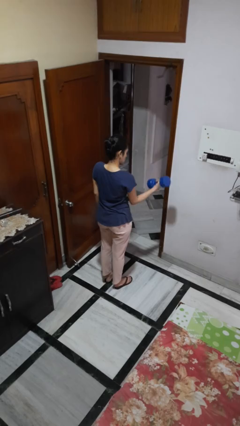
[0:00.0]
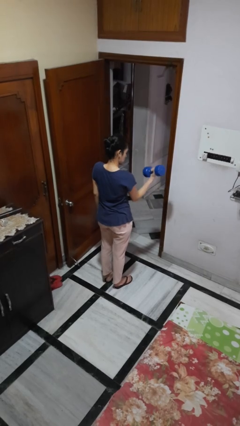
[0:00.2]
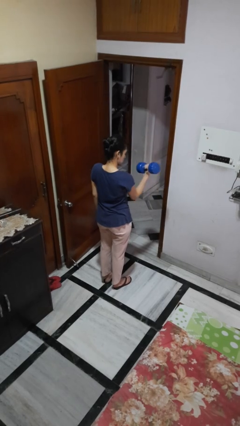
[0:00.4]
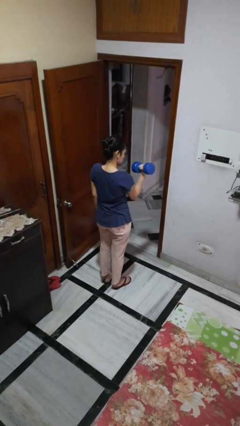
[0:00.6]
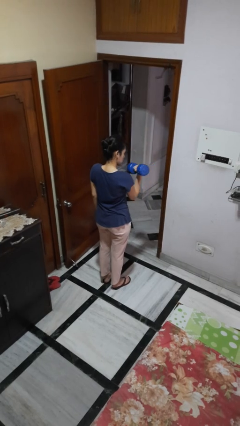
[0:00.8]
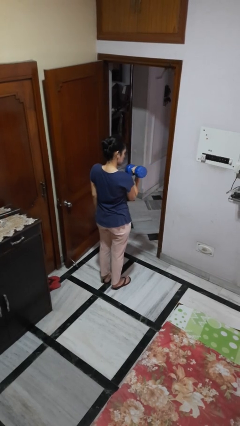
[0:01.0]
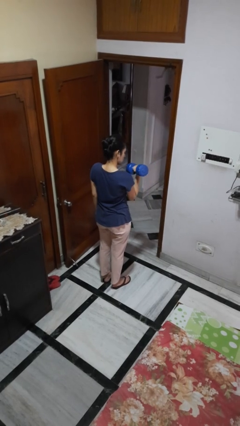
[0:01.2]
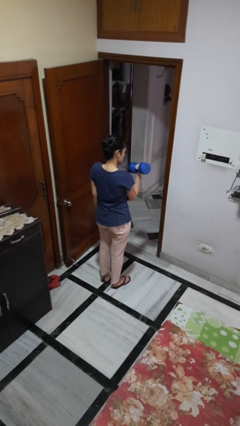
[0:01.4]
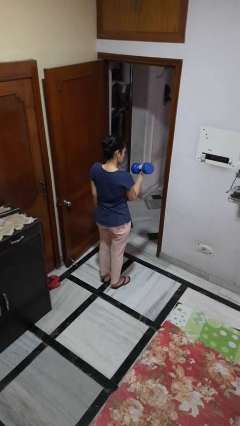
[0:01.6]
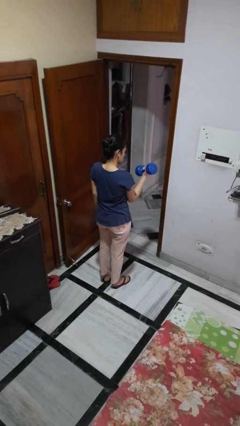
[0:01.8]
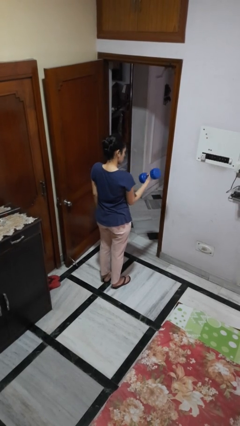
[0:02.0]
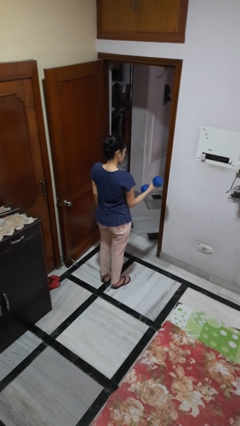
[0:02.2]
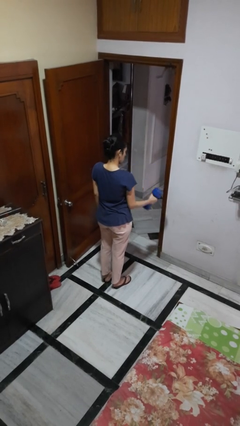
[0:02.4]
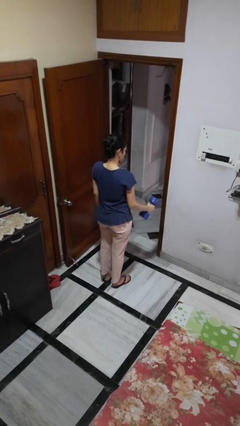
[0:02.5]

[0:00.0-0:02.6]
person lifts dumbbells

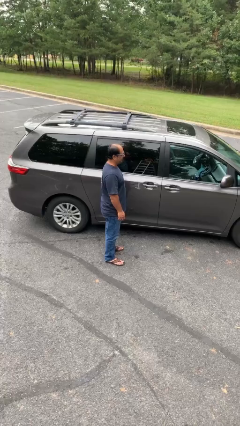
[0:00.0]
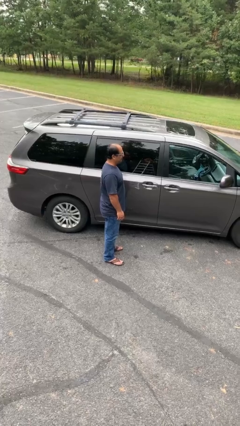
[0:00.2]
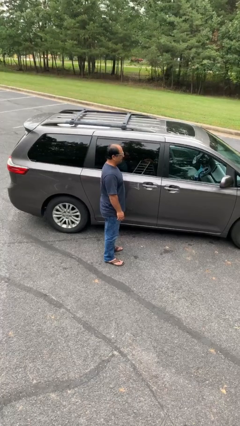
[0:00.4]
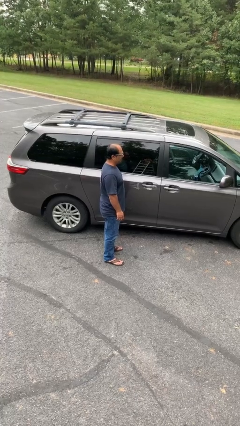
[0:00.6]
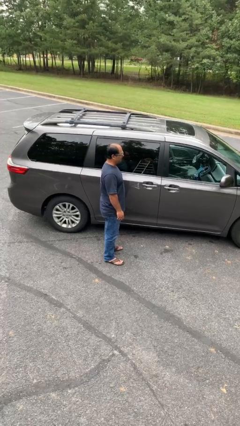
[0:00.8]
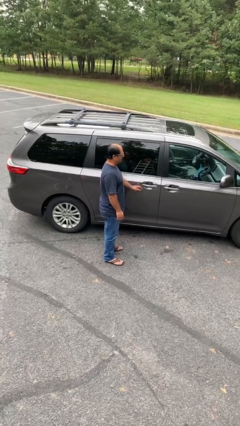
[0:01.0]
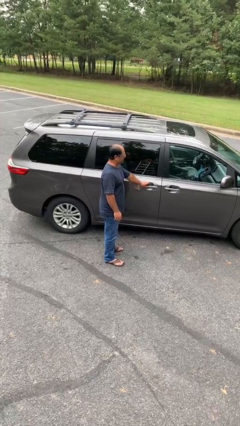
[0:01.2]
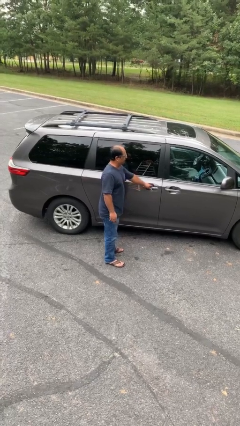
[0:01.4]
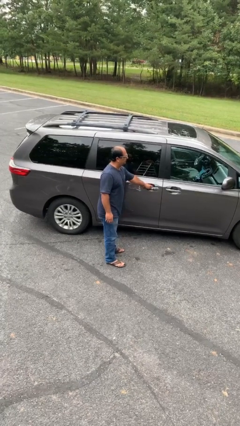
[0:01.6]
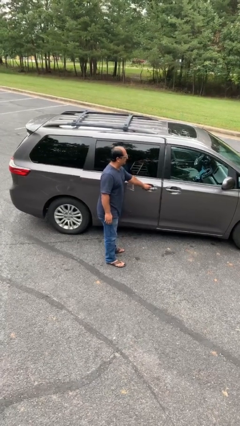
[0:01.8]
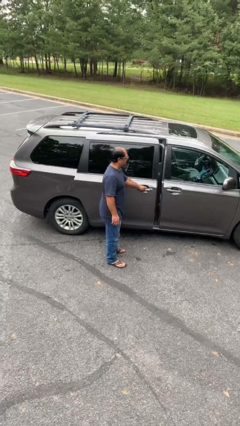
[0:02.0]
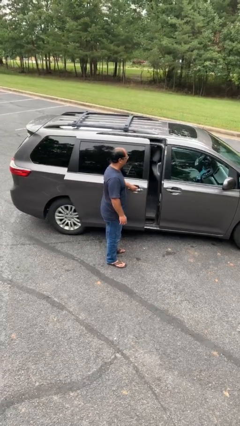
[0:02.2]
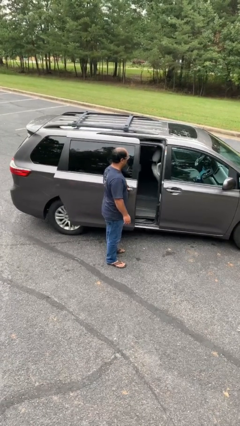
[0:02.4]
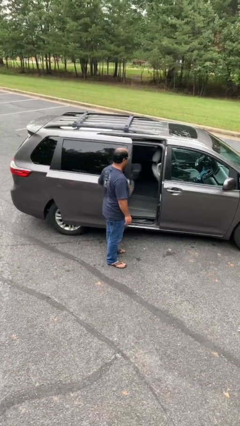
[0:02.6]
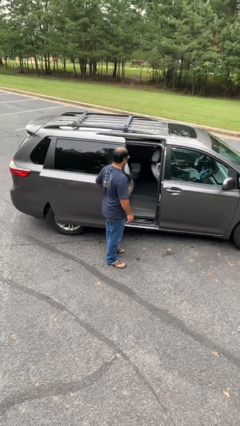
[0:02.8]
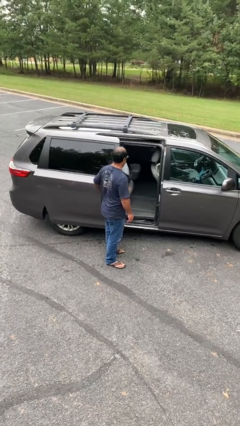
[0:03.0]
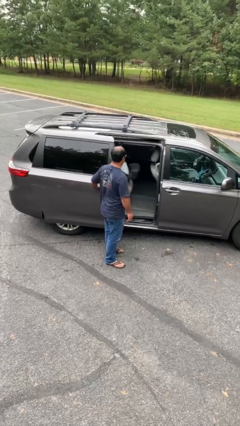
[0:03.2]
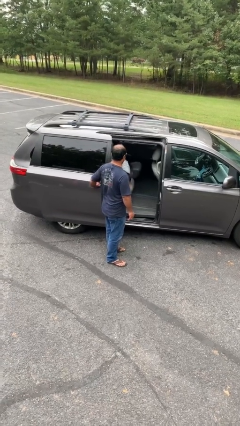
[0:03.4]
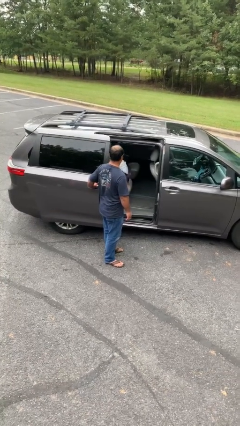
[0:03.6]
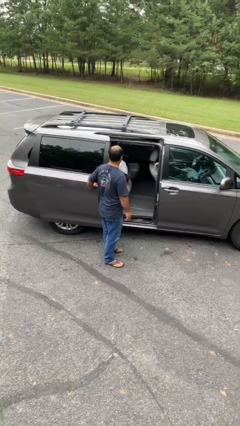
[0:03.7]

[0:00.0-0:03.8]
person opens car door

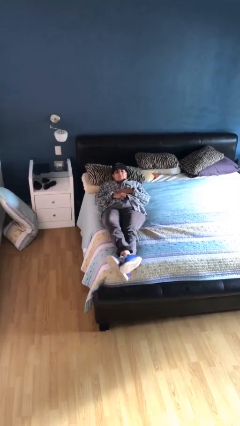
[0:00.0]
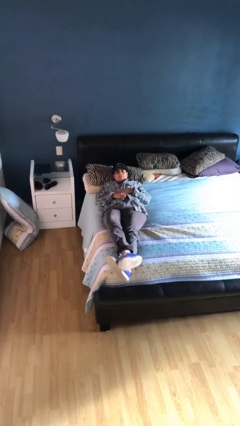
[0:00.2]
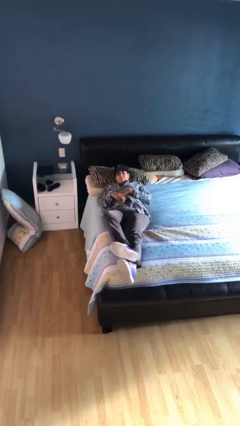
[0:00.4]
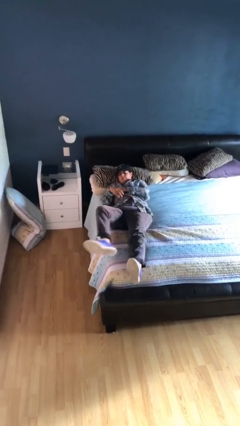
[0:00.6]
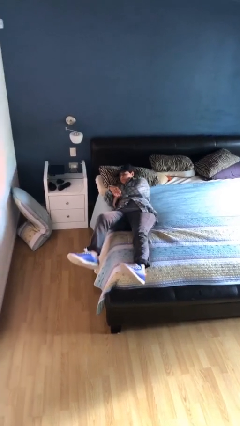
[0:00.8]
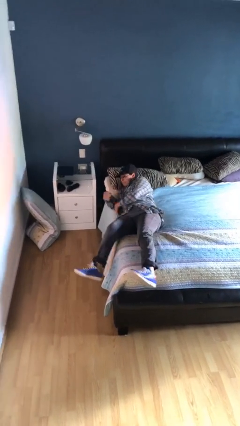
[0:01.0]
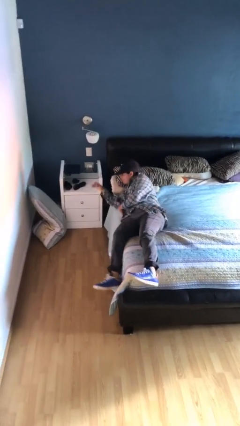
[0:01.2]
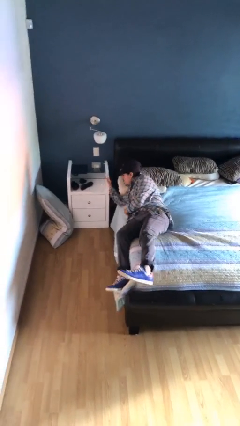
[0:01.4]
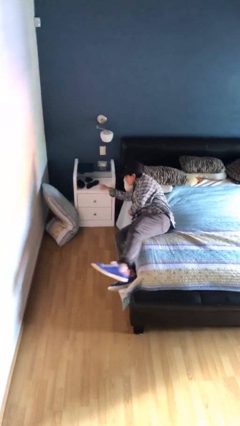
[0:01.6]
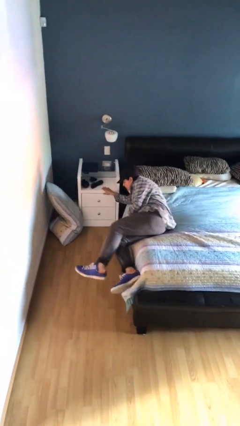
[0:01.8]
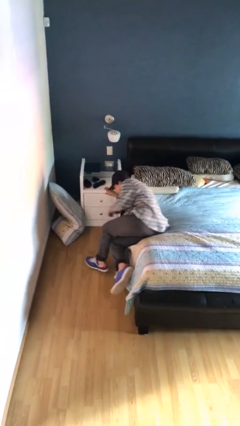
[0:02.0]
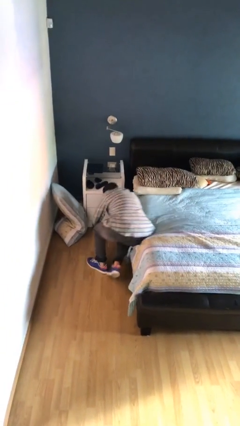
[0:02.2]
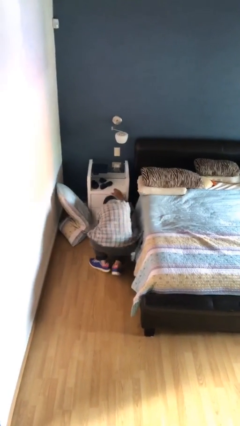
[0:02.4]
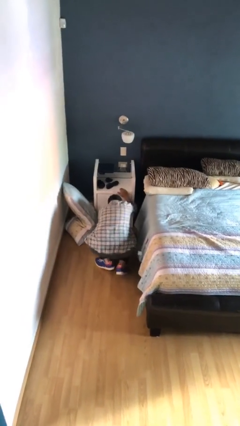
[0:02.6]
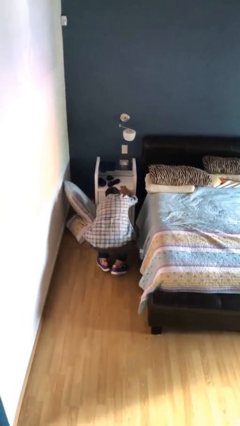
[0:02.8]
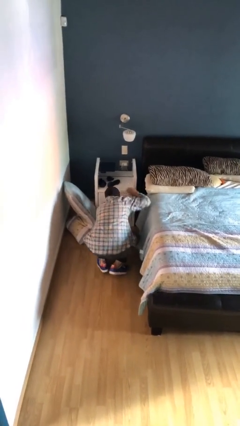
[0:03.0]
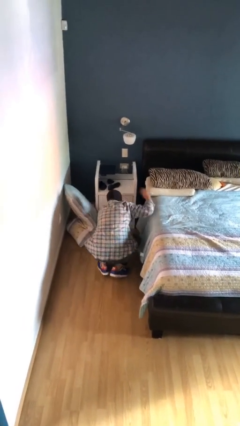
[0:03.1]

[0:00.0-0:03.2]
person falls from bed

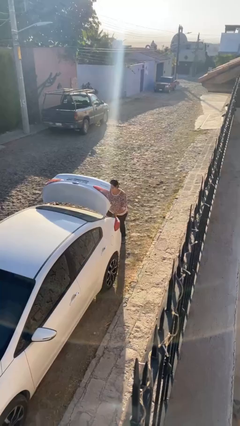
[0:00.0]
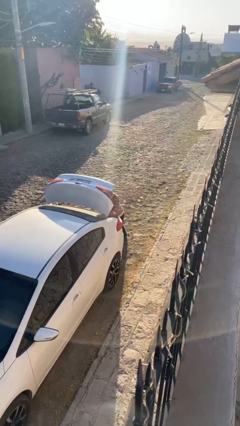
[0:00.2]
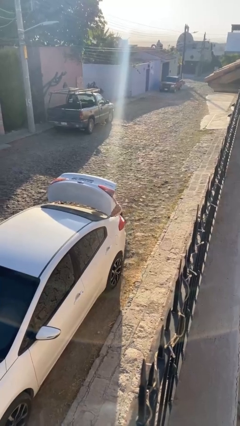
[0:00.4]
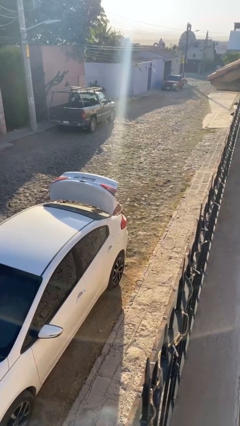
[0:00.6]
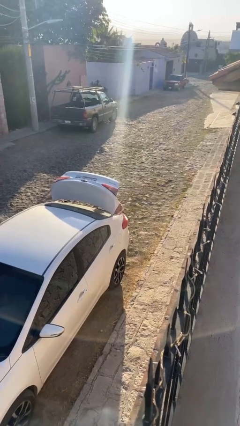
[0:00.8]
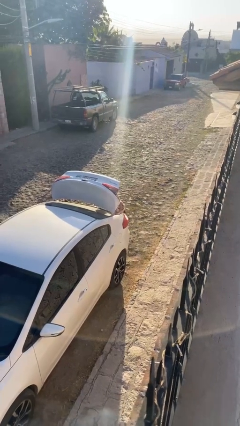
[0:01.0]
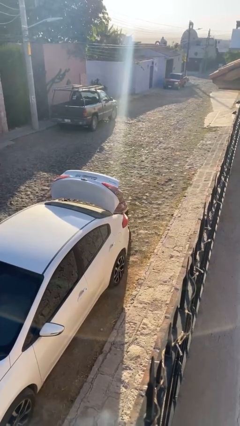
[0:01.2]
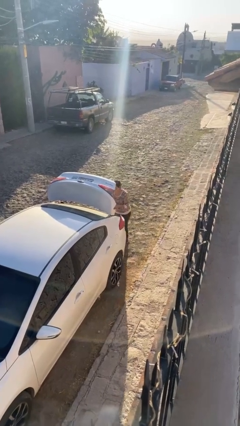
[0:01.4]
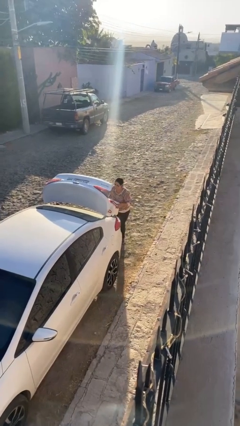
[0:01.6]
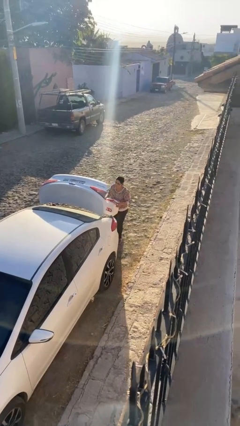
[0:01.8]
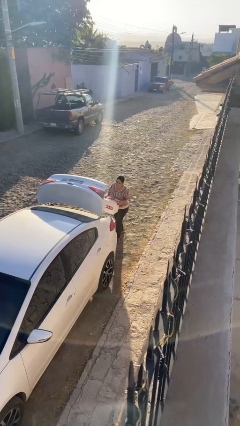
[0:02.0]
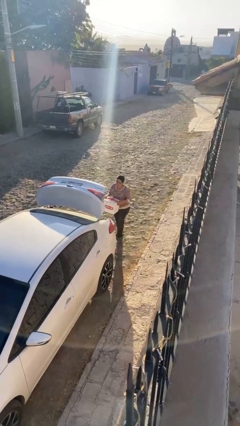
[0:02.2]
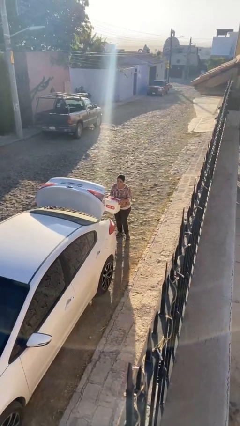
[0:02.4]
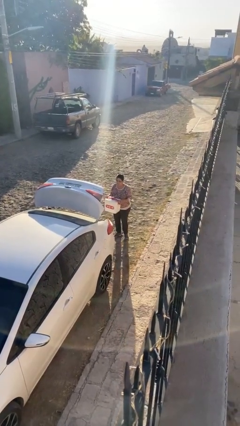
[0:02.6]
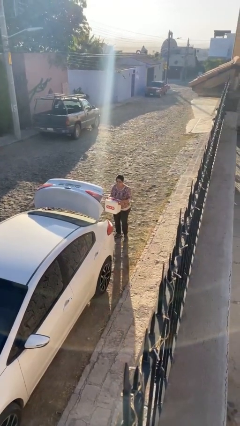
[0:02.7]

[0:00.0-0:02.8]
person unloads car

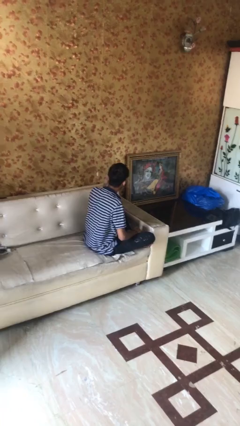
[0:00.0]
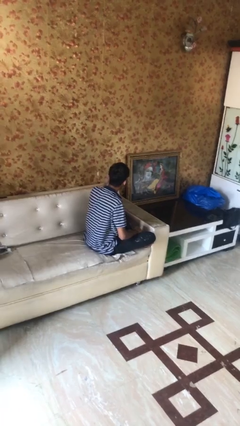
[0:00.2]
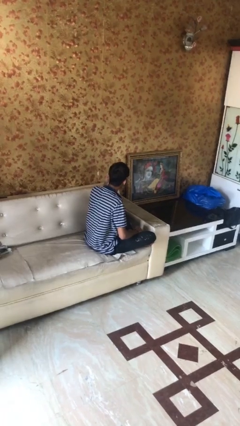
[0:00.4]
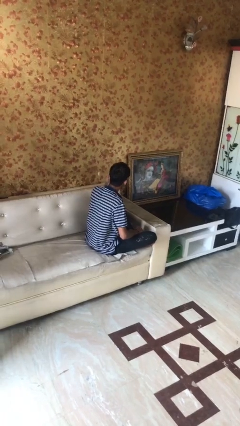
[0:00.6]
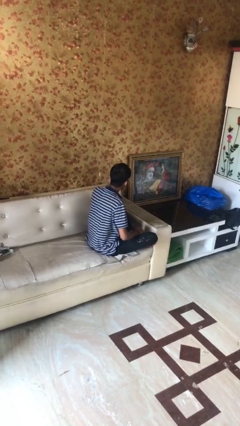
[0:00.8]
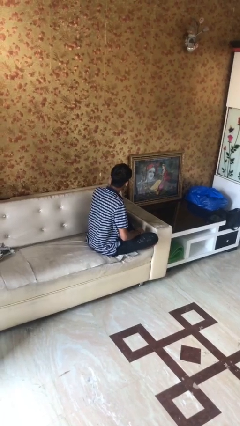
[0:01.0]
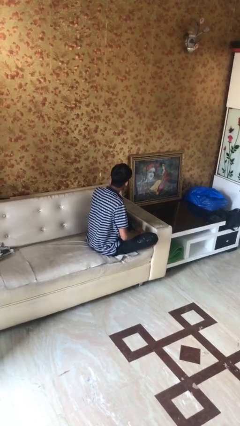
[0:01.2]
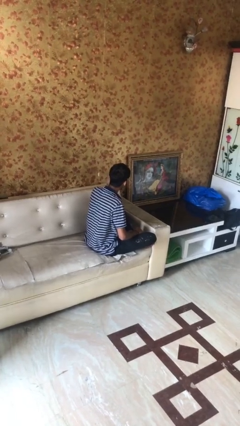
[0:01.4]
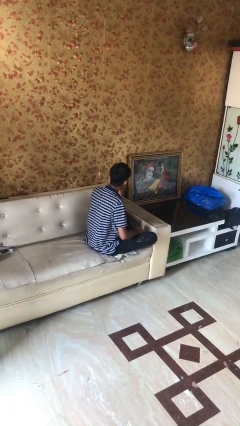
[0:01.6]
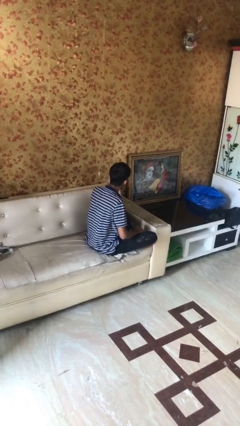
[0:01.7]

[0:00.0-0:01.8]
person rubs eyes

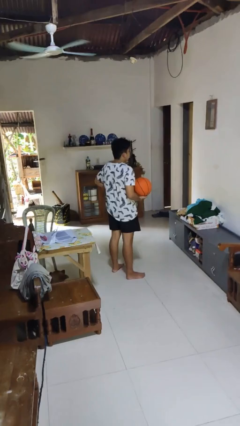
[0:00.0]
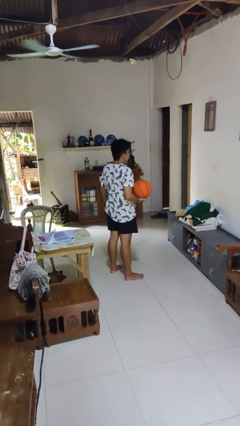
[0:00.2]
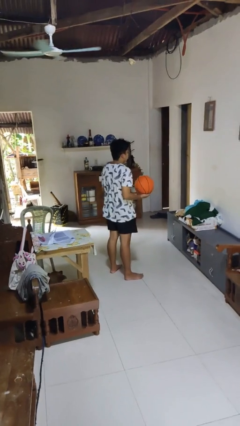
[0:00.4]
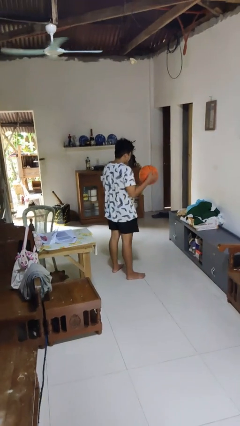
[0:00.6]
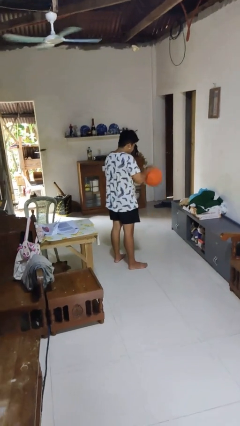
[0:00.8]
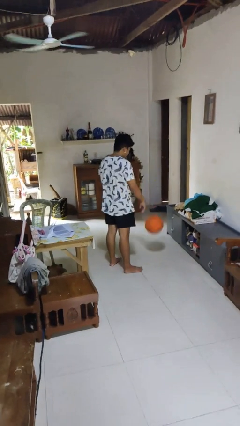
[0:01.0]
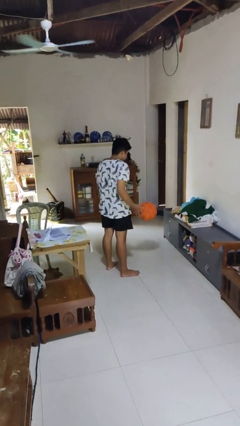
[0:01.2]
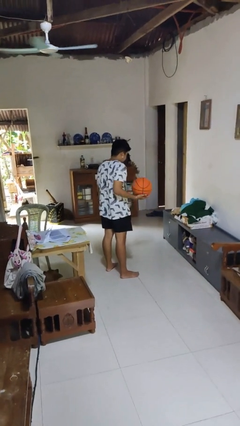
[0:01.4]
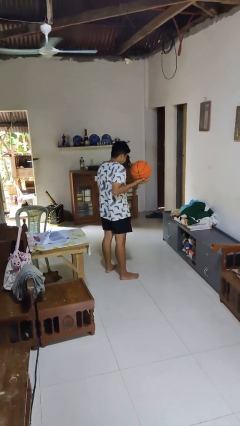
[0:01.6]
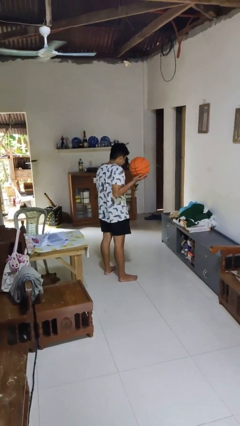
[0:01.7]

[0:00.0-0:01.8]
person bounces ball on floor

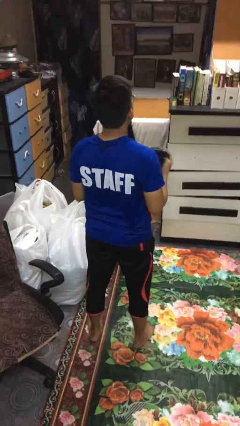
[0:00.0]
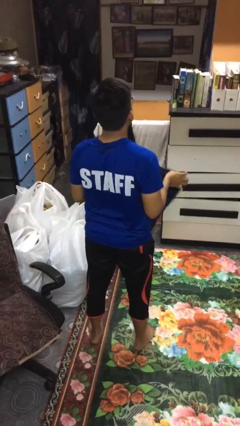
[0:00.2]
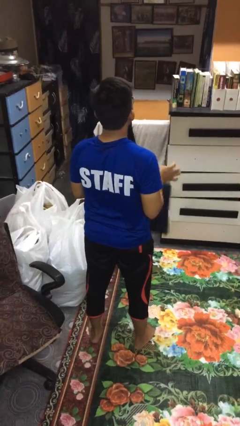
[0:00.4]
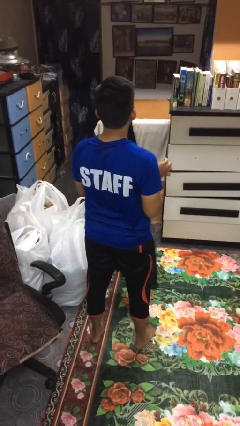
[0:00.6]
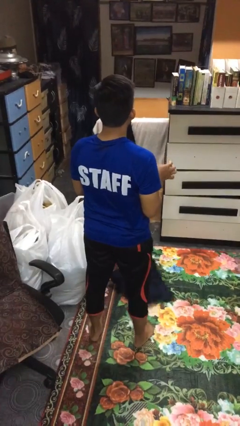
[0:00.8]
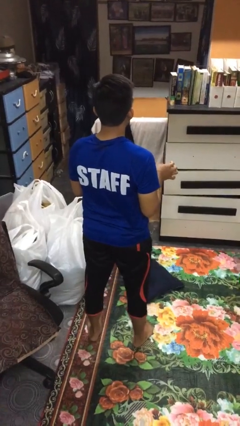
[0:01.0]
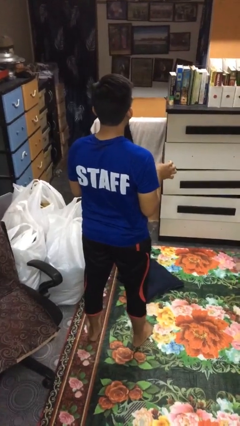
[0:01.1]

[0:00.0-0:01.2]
person drops object

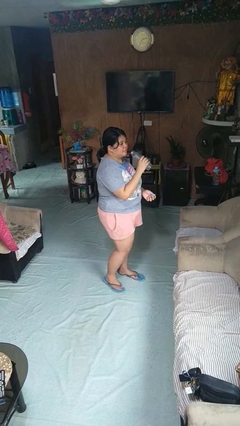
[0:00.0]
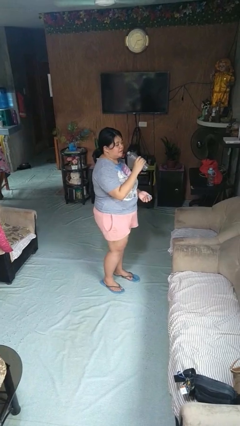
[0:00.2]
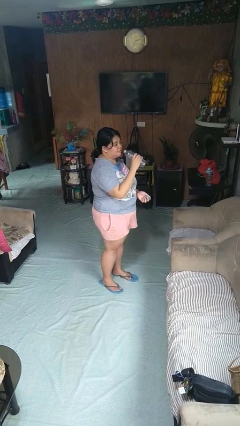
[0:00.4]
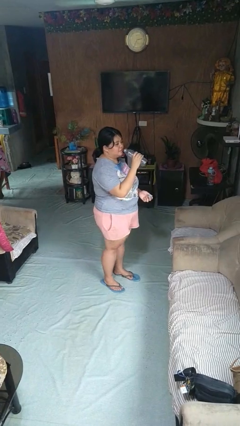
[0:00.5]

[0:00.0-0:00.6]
person drinks from bottle
